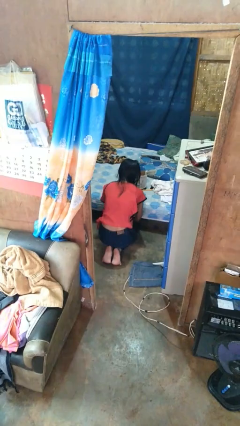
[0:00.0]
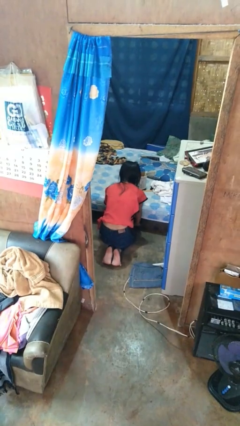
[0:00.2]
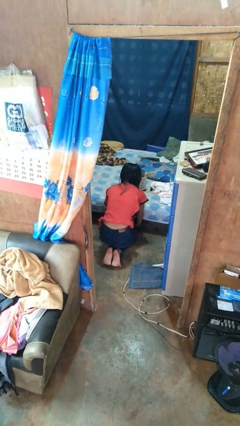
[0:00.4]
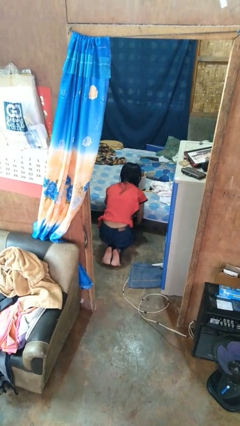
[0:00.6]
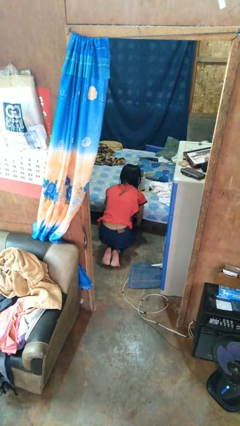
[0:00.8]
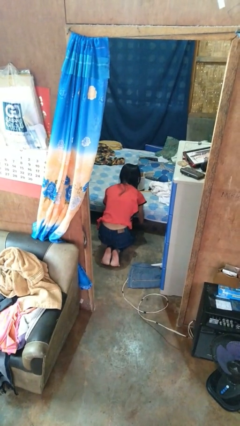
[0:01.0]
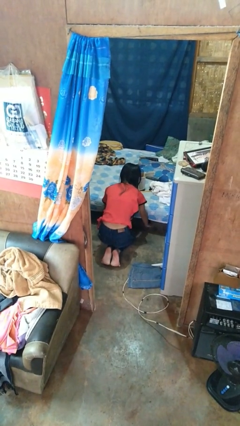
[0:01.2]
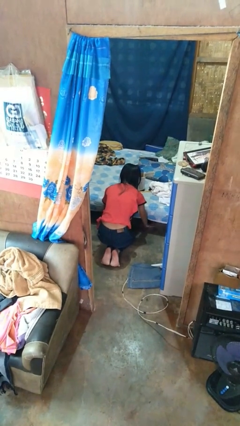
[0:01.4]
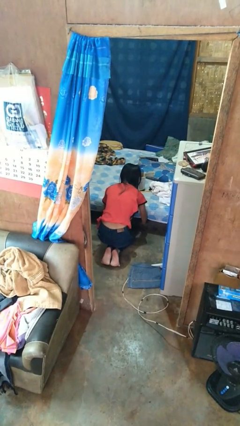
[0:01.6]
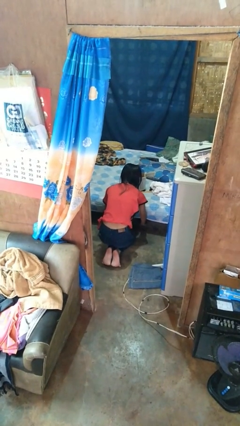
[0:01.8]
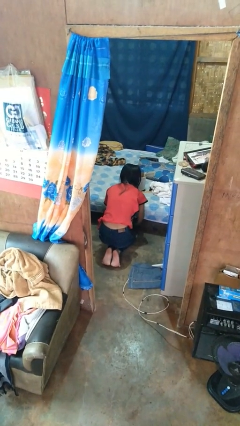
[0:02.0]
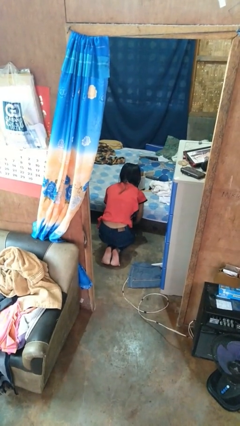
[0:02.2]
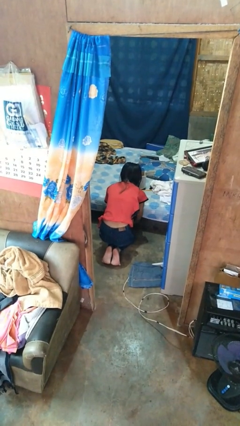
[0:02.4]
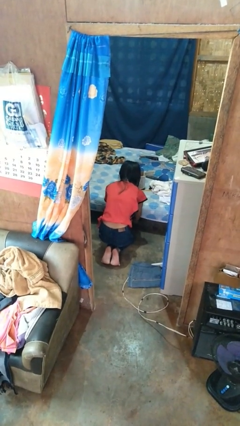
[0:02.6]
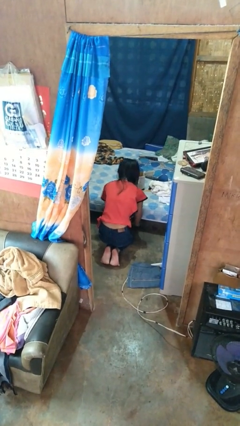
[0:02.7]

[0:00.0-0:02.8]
person searches under bed

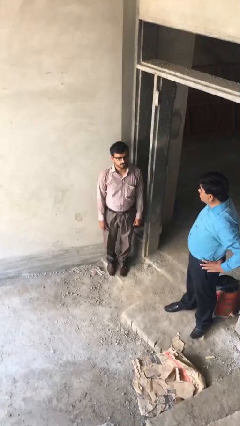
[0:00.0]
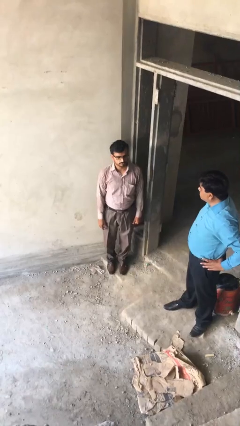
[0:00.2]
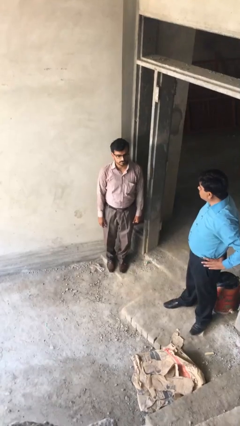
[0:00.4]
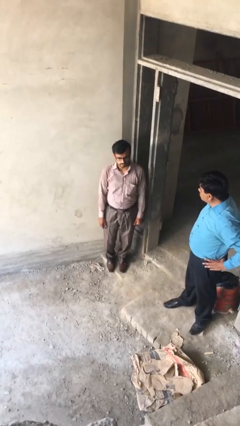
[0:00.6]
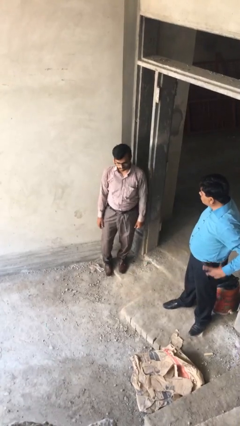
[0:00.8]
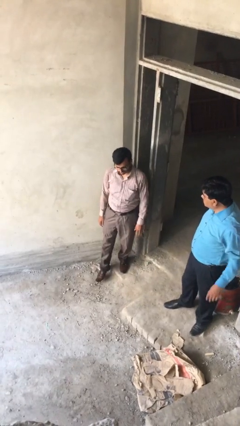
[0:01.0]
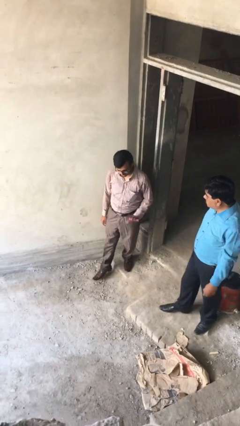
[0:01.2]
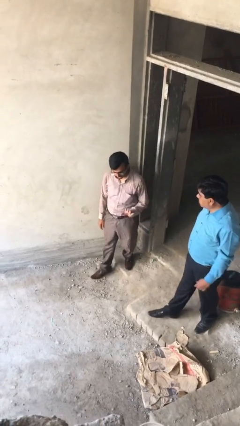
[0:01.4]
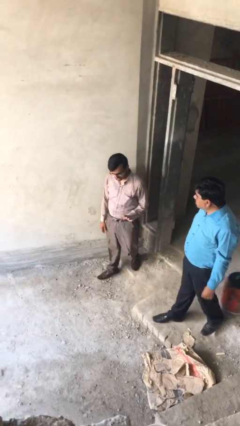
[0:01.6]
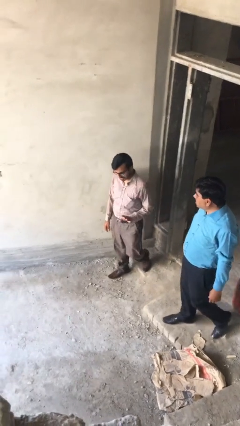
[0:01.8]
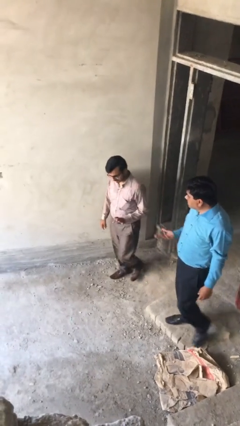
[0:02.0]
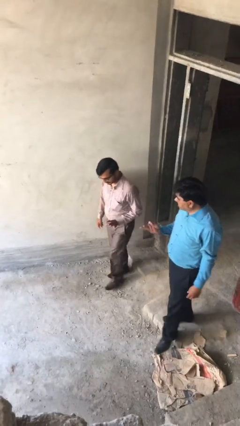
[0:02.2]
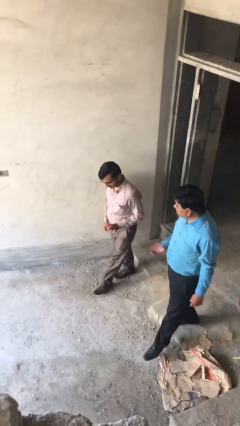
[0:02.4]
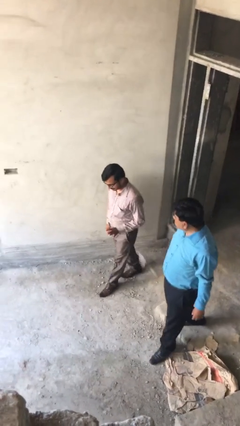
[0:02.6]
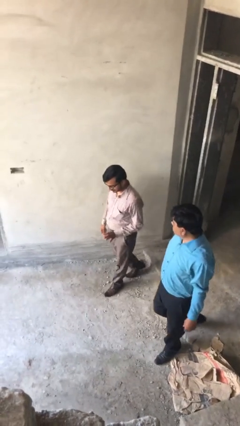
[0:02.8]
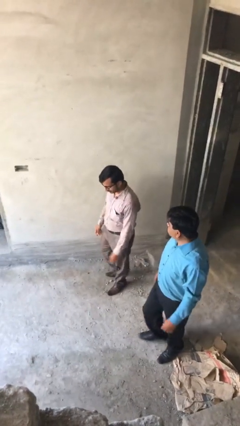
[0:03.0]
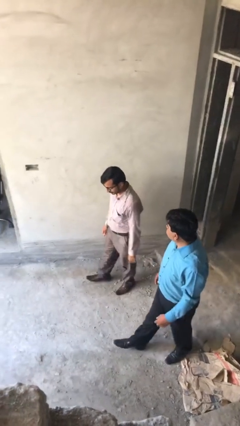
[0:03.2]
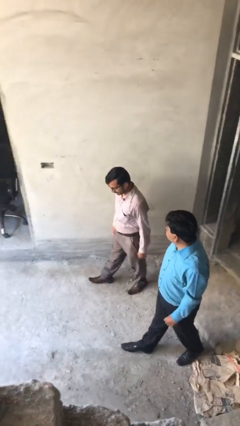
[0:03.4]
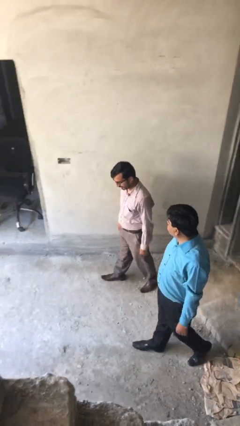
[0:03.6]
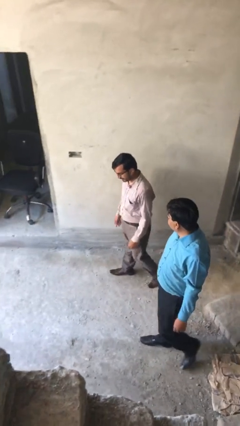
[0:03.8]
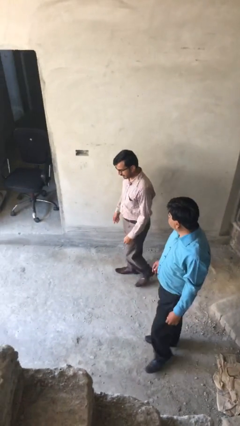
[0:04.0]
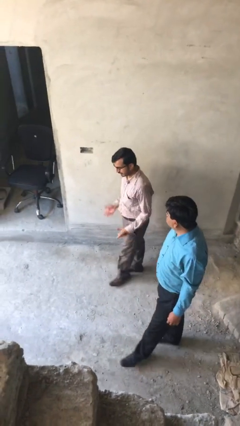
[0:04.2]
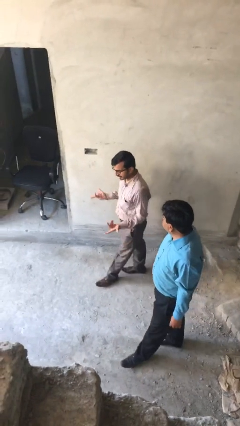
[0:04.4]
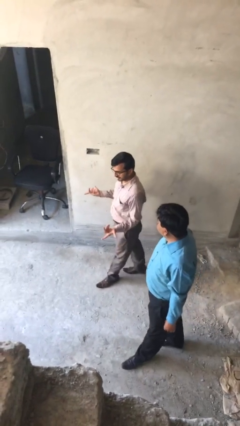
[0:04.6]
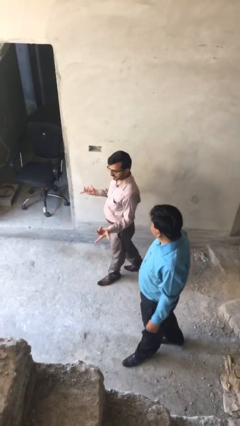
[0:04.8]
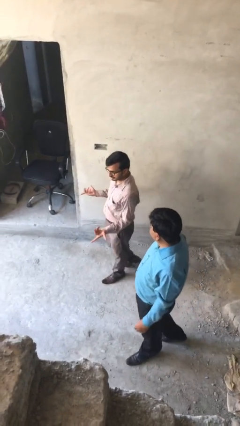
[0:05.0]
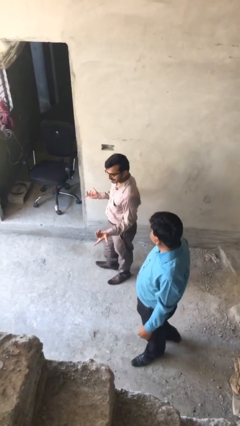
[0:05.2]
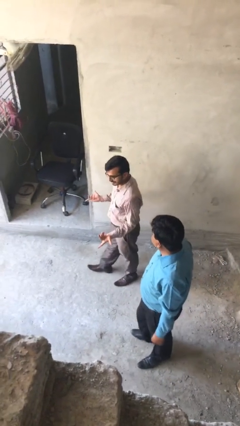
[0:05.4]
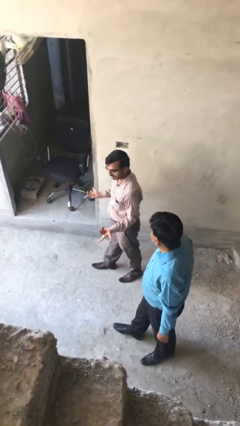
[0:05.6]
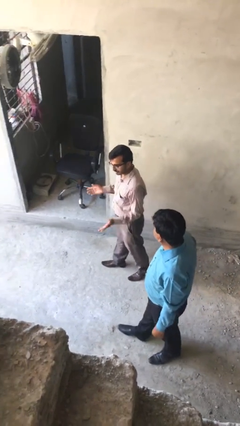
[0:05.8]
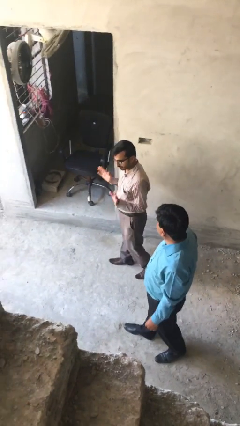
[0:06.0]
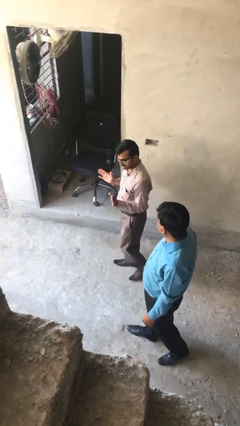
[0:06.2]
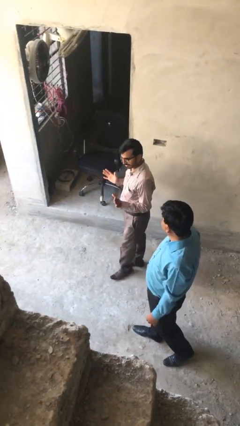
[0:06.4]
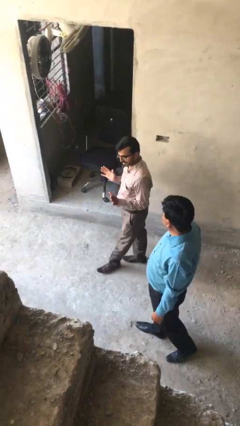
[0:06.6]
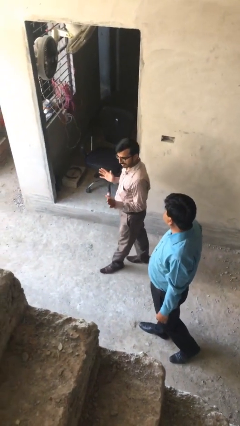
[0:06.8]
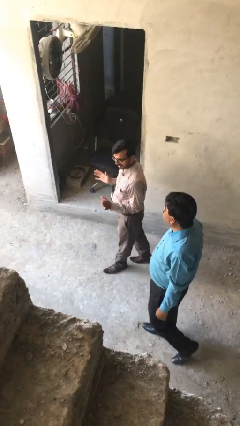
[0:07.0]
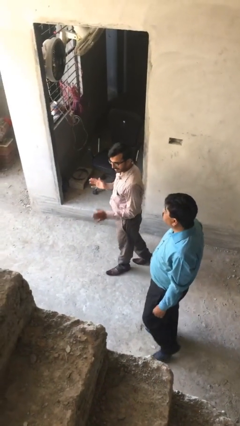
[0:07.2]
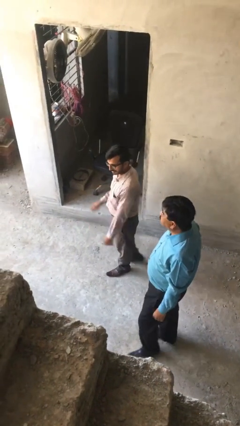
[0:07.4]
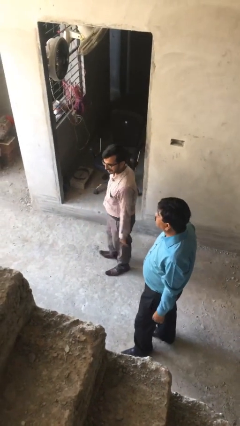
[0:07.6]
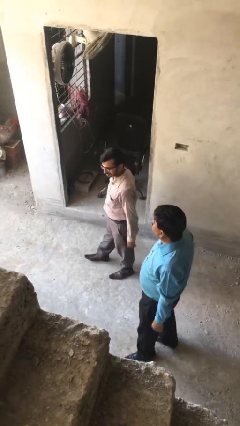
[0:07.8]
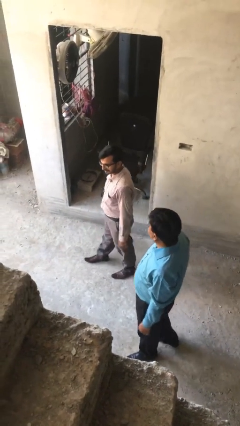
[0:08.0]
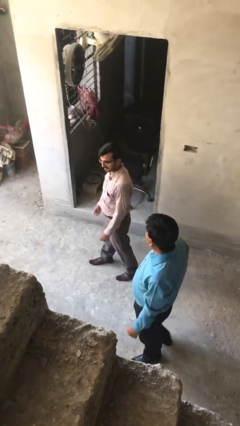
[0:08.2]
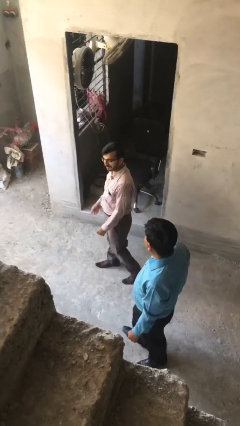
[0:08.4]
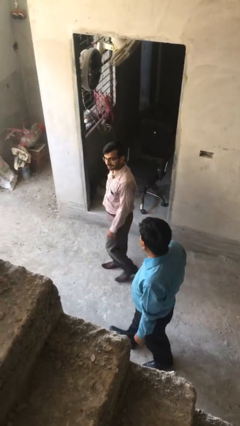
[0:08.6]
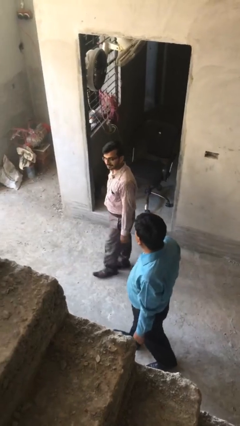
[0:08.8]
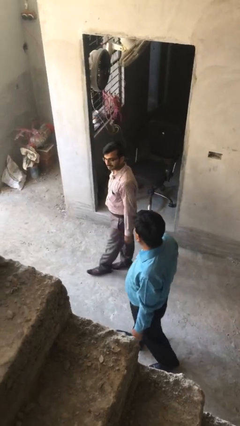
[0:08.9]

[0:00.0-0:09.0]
person talks to person

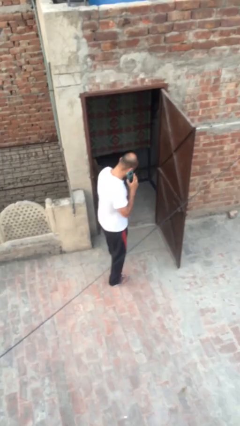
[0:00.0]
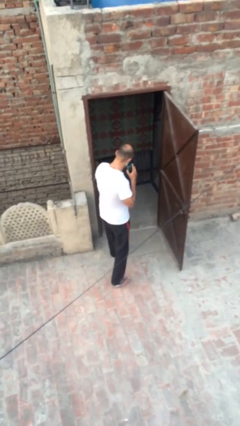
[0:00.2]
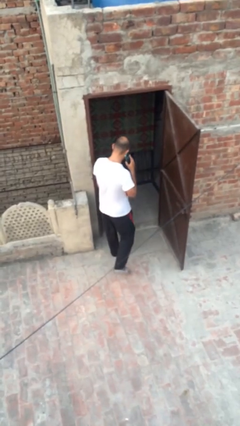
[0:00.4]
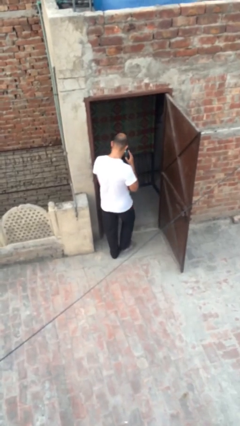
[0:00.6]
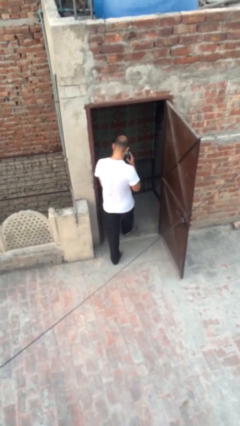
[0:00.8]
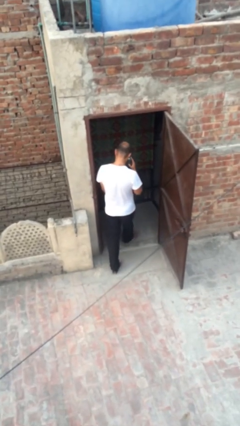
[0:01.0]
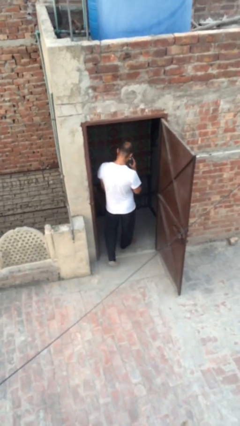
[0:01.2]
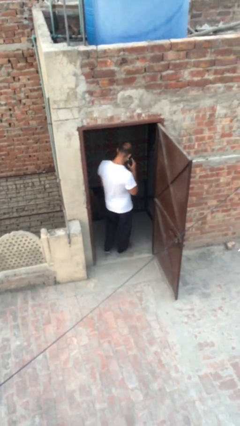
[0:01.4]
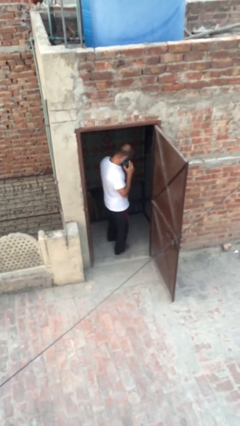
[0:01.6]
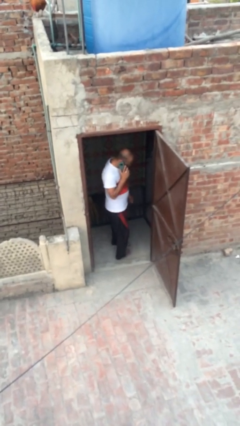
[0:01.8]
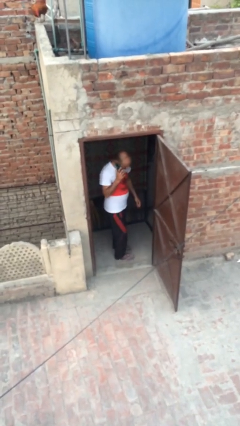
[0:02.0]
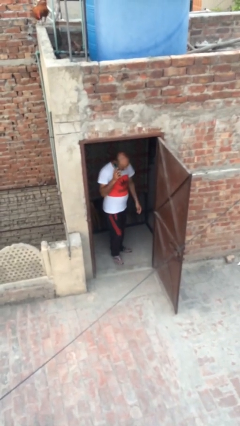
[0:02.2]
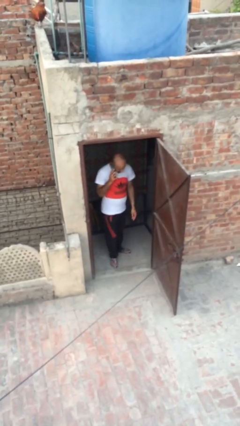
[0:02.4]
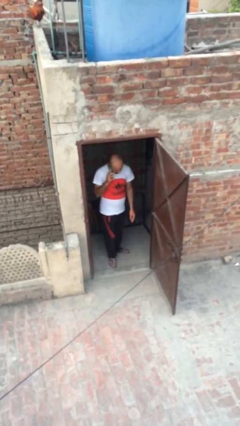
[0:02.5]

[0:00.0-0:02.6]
person exits scene through structure

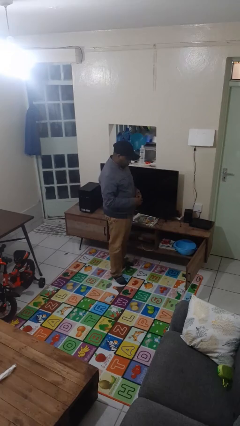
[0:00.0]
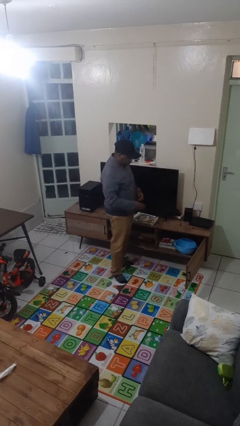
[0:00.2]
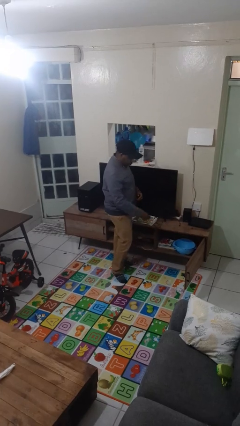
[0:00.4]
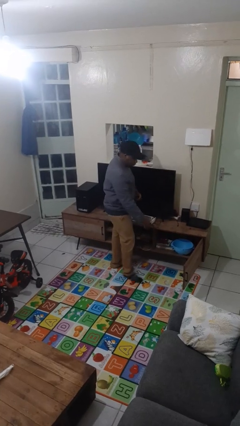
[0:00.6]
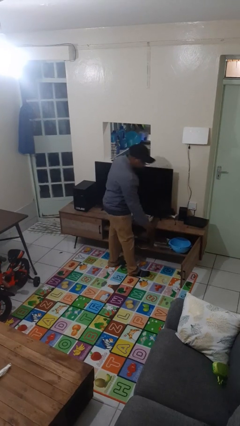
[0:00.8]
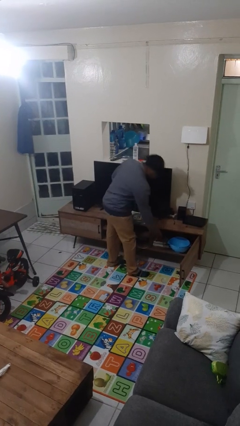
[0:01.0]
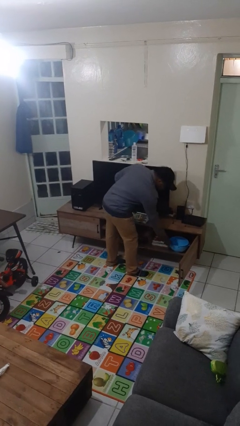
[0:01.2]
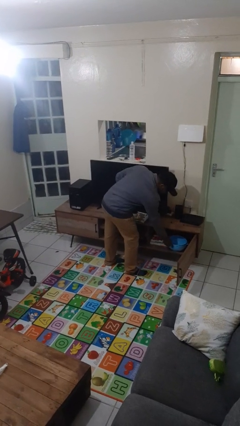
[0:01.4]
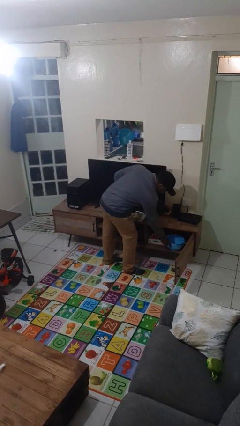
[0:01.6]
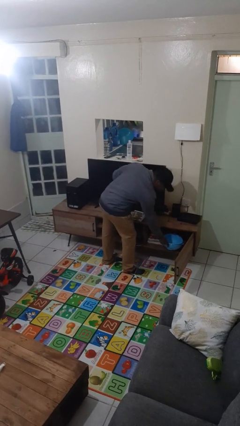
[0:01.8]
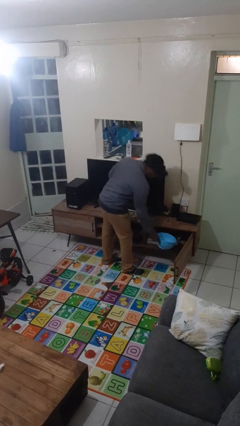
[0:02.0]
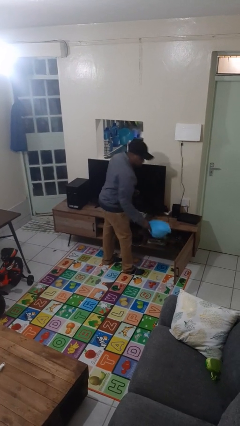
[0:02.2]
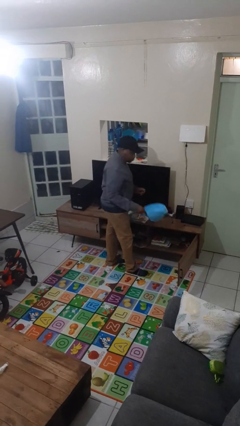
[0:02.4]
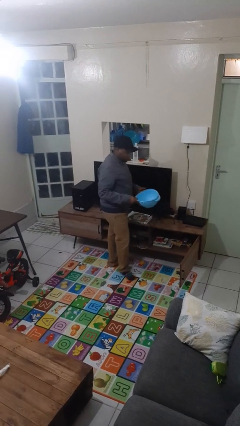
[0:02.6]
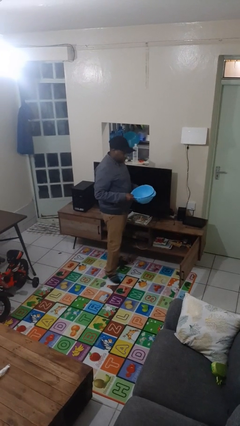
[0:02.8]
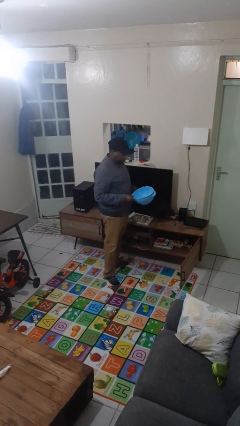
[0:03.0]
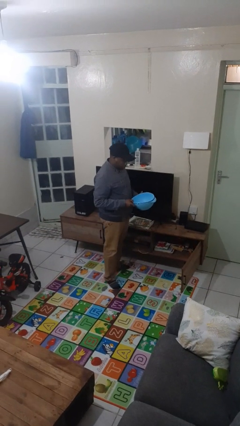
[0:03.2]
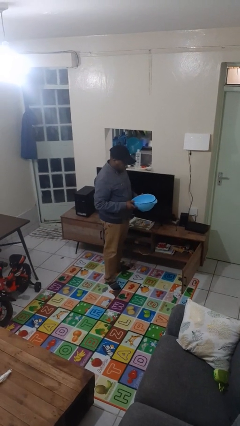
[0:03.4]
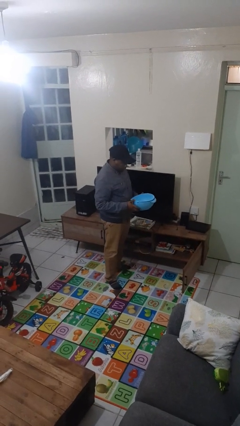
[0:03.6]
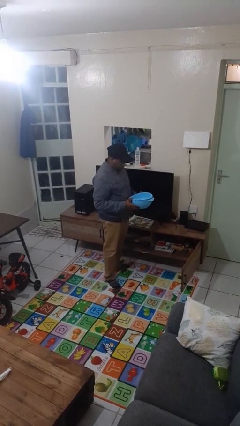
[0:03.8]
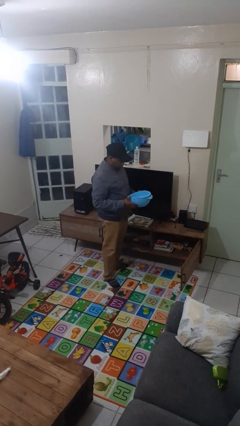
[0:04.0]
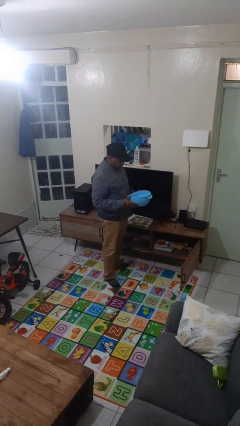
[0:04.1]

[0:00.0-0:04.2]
person picks up object from cabinet
